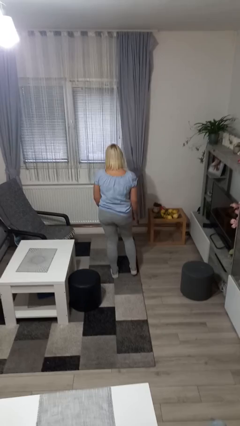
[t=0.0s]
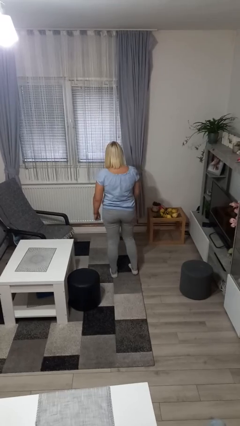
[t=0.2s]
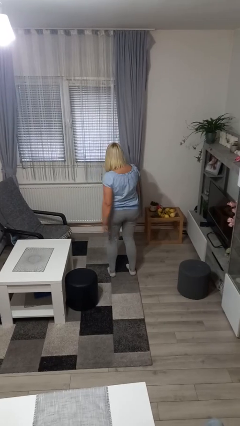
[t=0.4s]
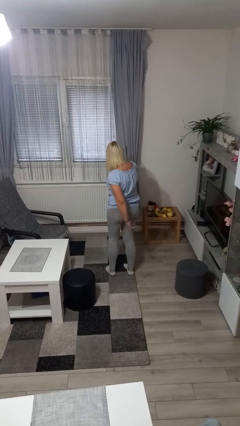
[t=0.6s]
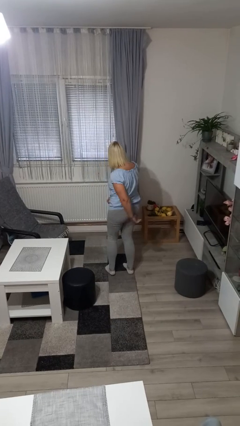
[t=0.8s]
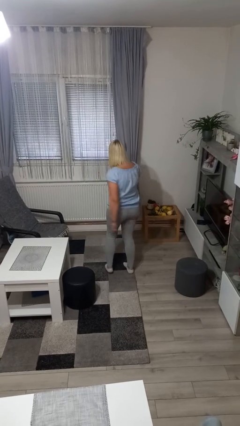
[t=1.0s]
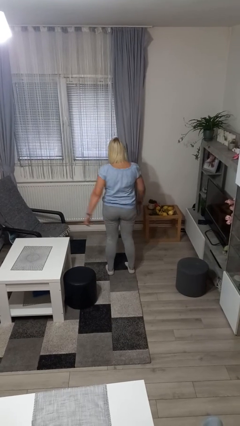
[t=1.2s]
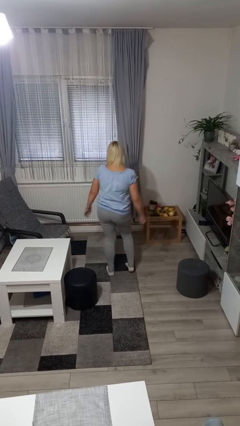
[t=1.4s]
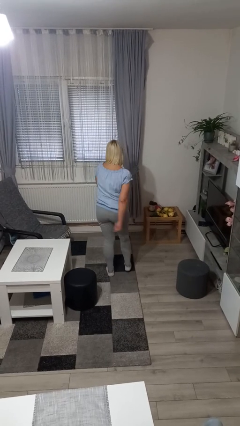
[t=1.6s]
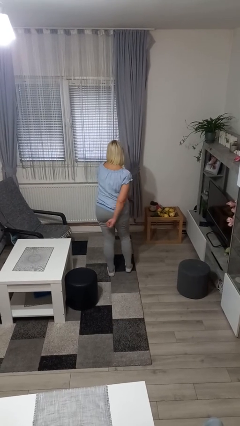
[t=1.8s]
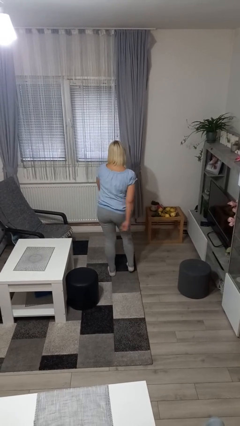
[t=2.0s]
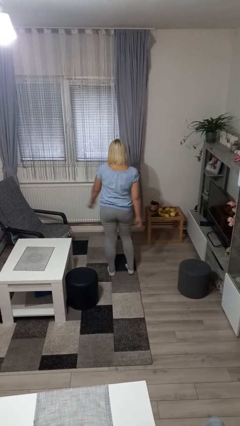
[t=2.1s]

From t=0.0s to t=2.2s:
person dances in place

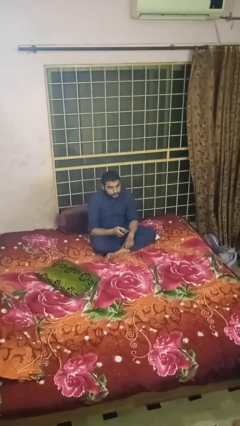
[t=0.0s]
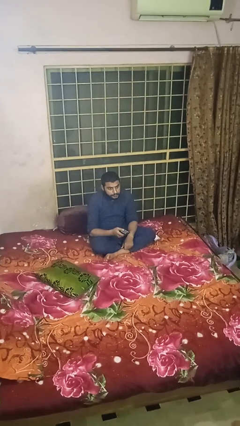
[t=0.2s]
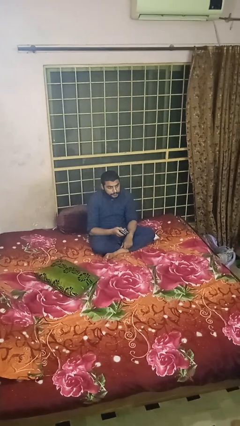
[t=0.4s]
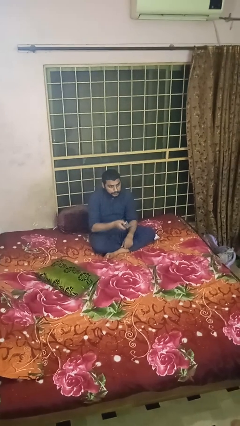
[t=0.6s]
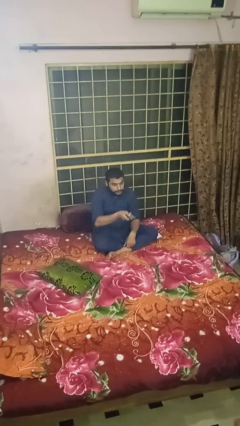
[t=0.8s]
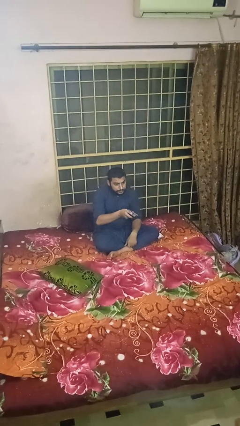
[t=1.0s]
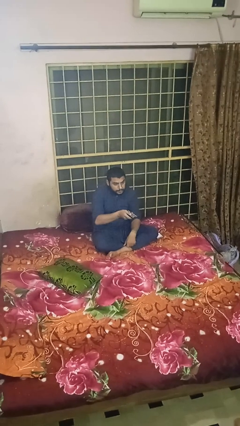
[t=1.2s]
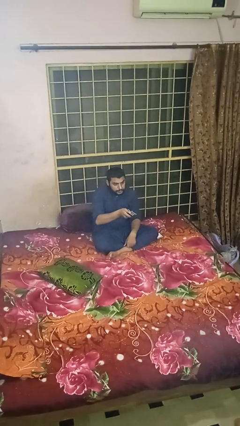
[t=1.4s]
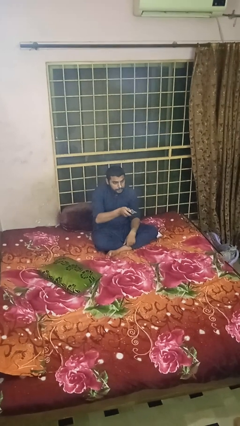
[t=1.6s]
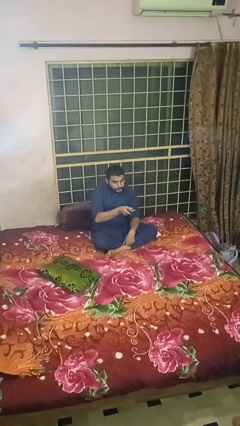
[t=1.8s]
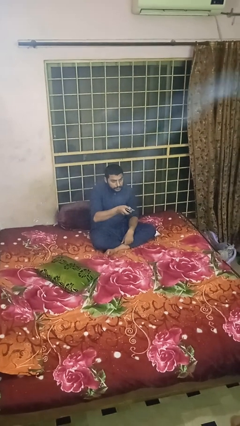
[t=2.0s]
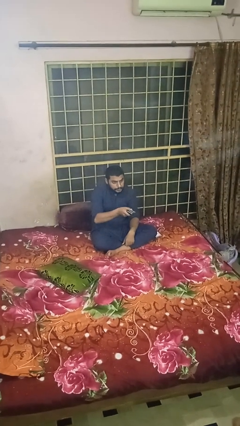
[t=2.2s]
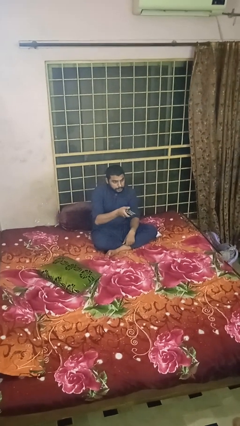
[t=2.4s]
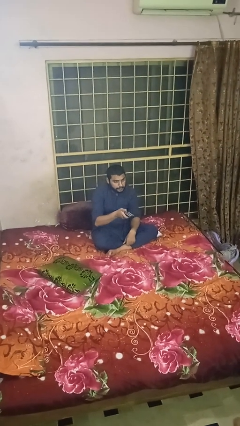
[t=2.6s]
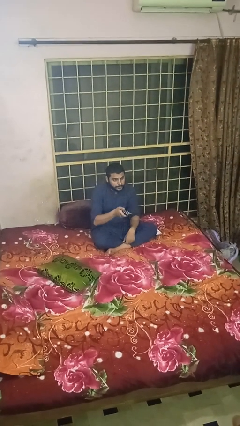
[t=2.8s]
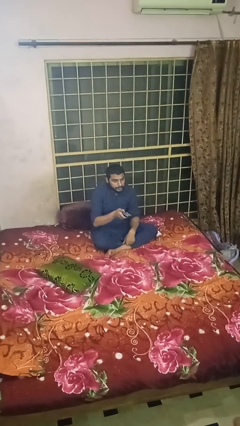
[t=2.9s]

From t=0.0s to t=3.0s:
person uses television remote

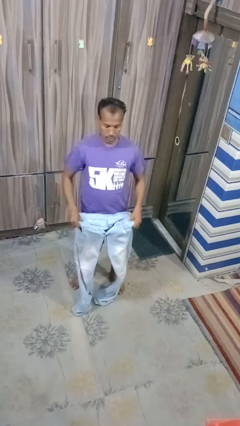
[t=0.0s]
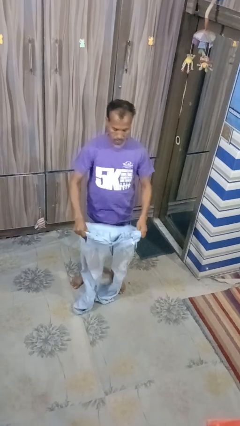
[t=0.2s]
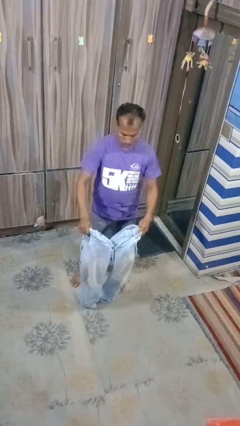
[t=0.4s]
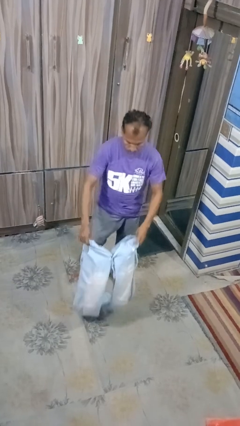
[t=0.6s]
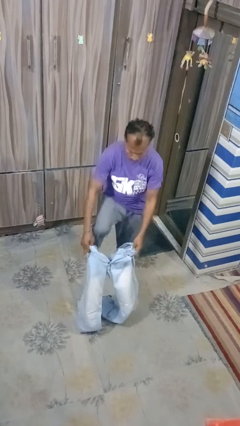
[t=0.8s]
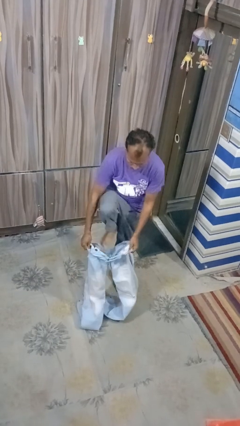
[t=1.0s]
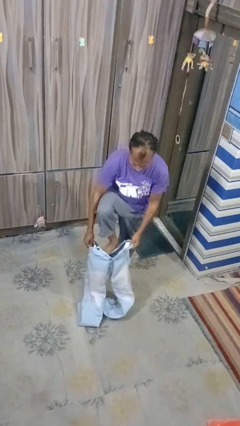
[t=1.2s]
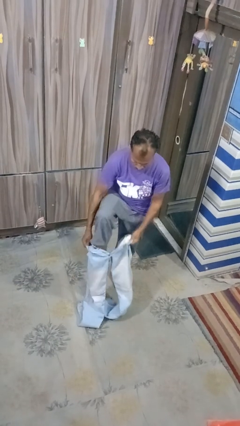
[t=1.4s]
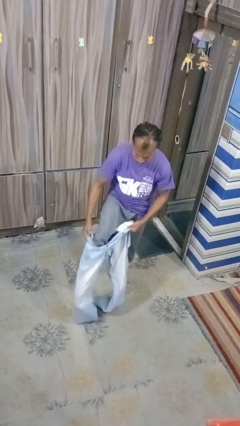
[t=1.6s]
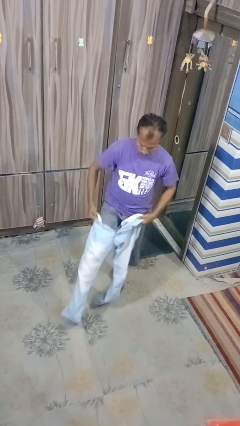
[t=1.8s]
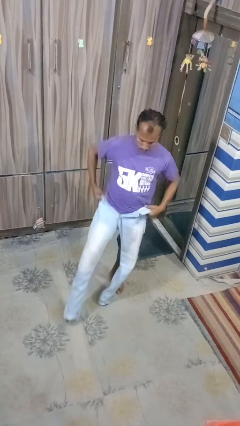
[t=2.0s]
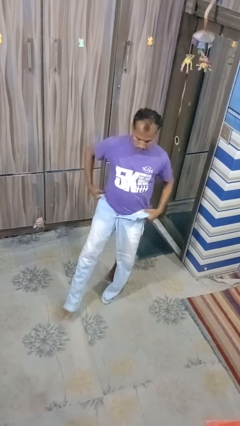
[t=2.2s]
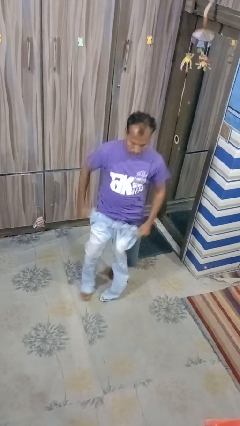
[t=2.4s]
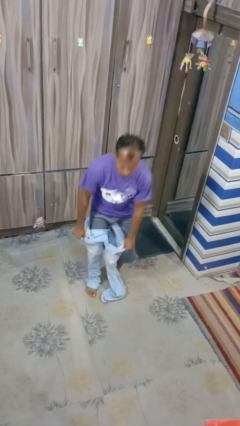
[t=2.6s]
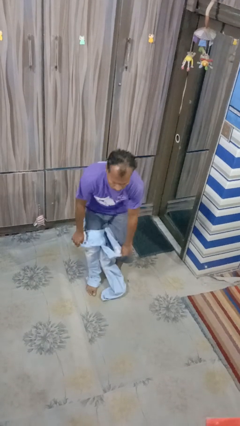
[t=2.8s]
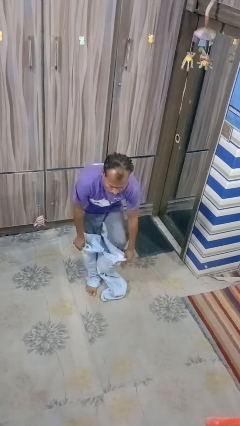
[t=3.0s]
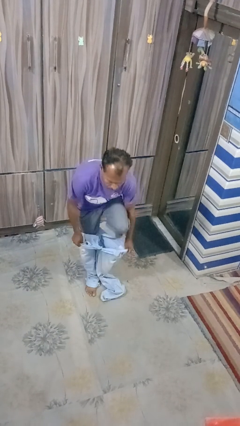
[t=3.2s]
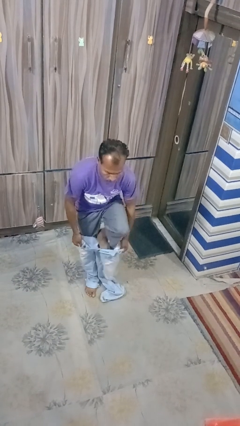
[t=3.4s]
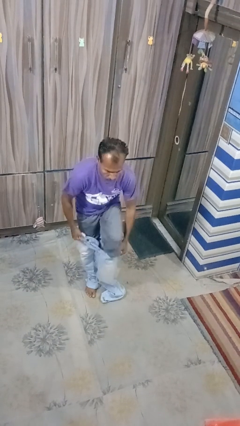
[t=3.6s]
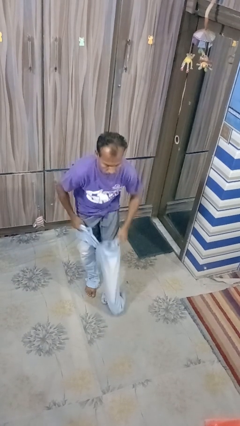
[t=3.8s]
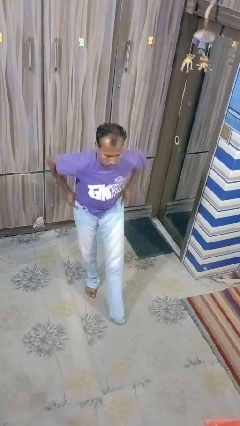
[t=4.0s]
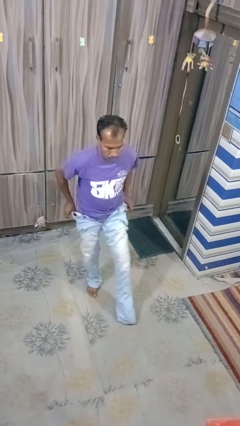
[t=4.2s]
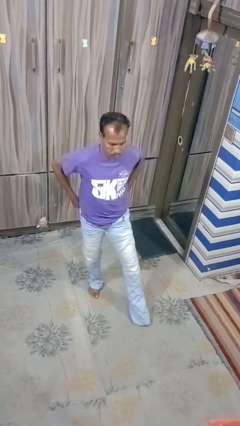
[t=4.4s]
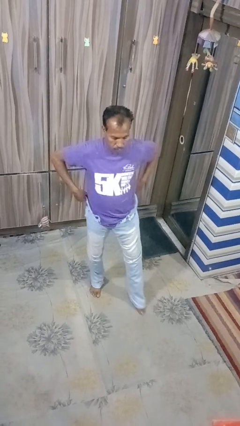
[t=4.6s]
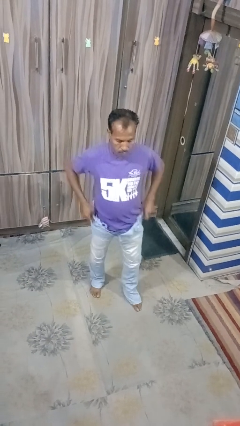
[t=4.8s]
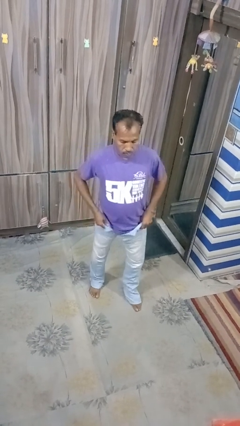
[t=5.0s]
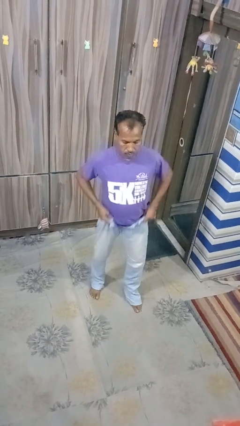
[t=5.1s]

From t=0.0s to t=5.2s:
person puts on pants

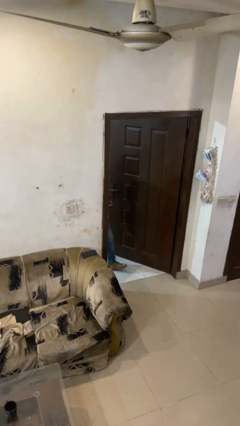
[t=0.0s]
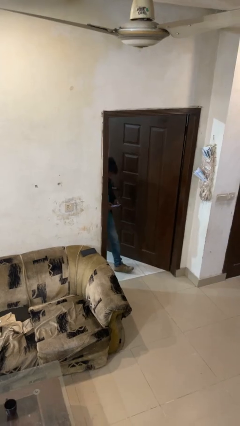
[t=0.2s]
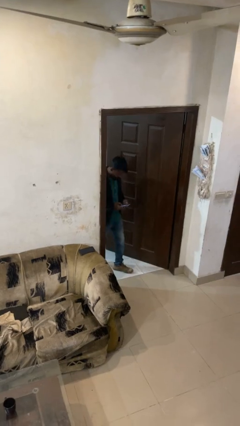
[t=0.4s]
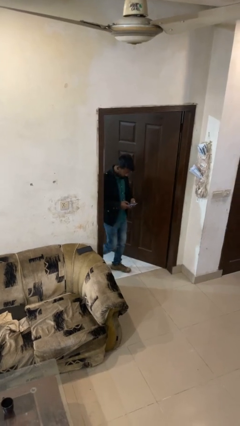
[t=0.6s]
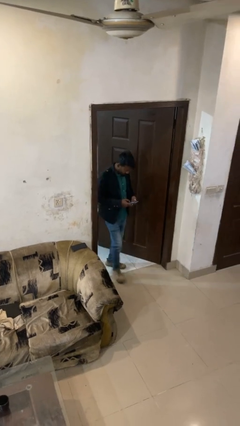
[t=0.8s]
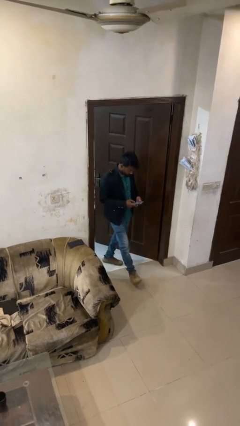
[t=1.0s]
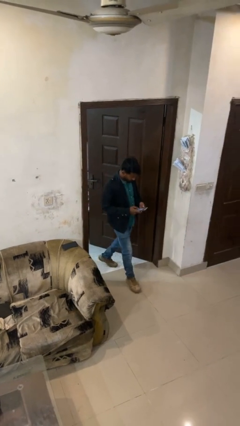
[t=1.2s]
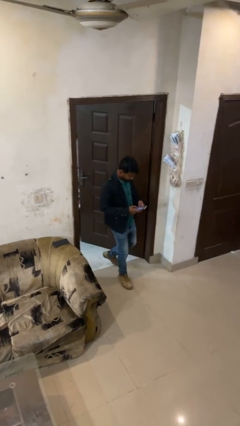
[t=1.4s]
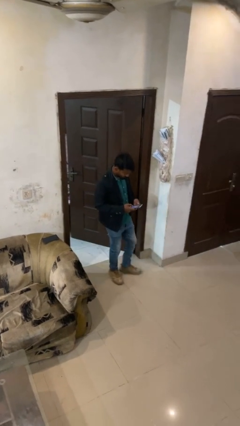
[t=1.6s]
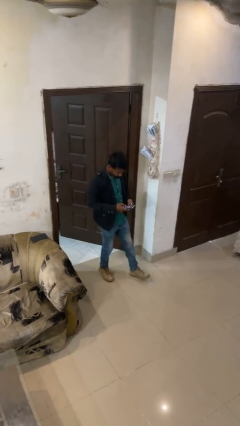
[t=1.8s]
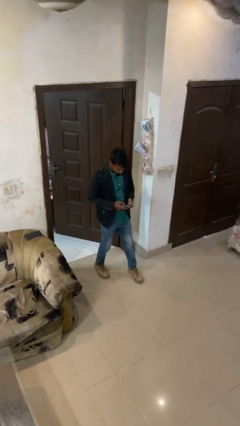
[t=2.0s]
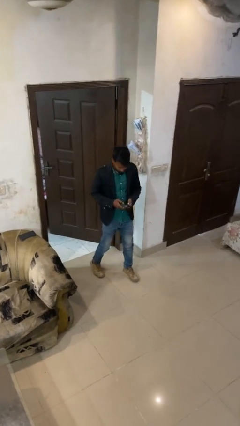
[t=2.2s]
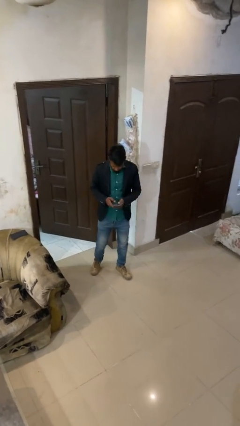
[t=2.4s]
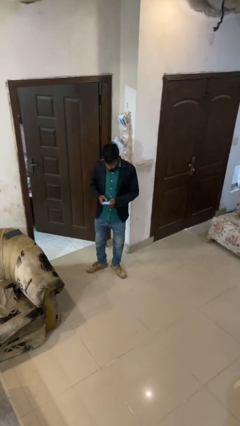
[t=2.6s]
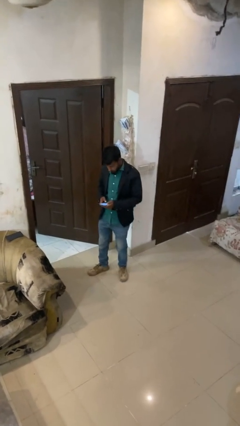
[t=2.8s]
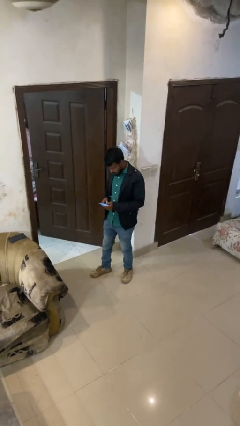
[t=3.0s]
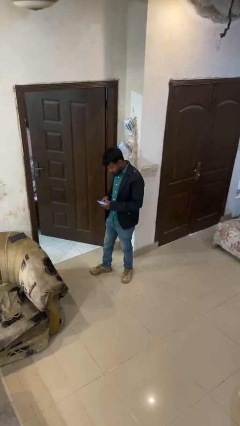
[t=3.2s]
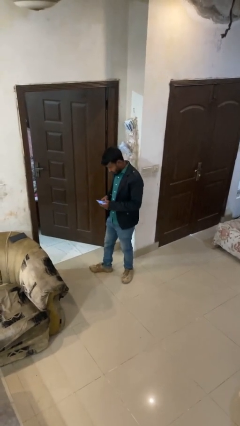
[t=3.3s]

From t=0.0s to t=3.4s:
person enters scene through structure

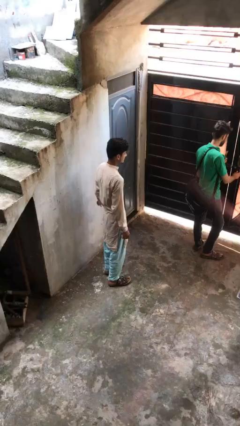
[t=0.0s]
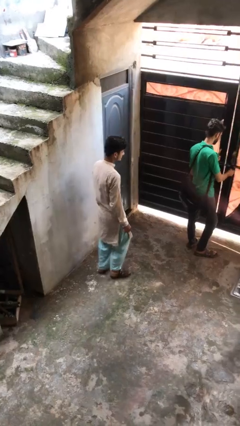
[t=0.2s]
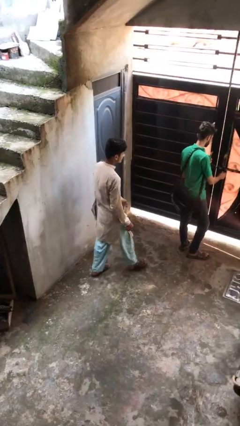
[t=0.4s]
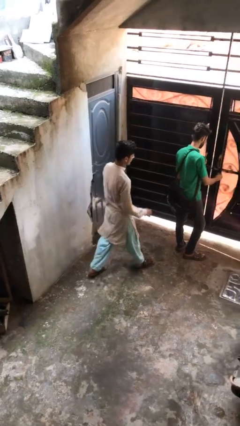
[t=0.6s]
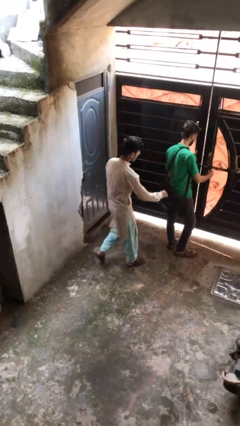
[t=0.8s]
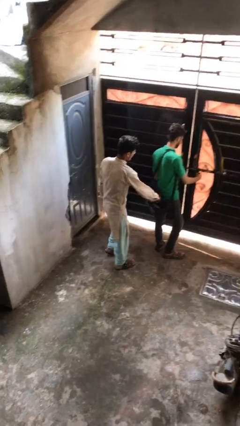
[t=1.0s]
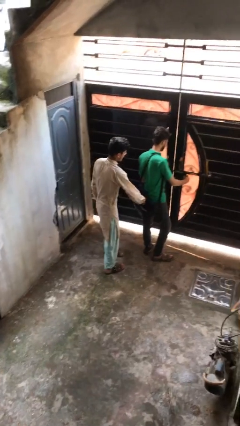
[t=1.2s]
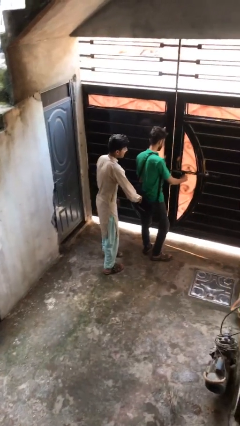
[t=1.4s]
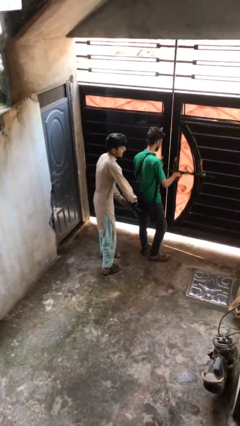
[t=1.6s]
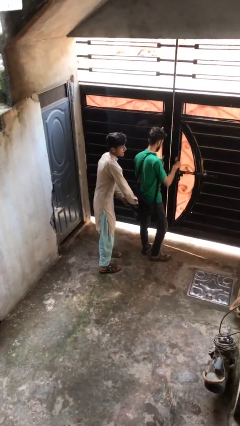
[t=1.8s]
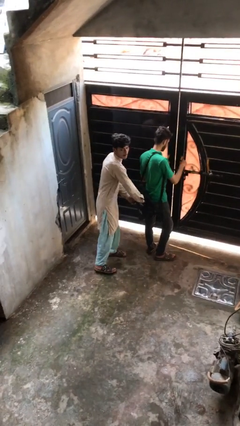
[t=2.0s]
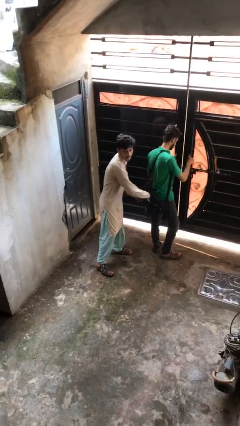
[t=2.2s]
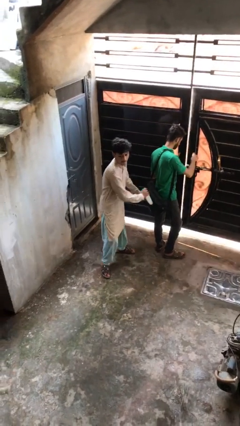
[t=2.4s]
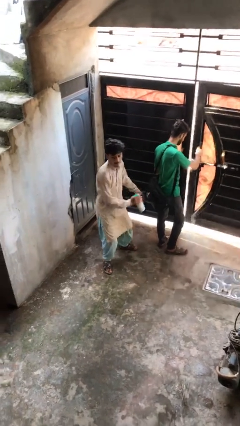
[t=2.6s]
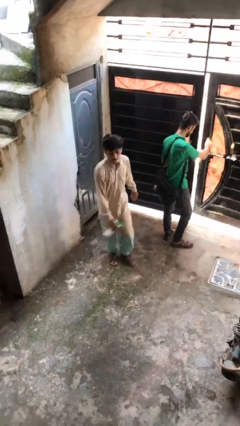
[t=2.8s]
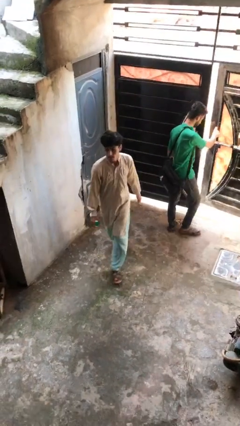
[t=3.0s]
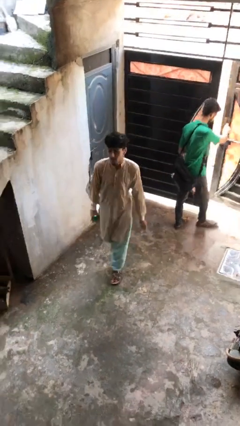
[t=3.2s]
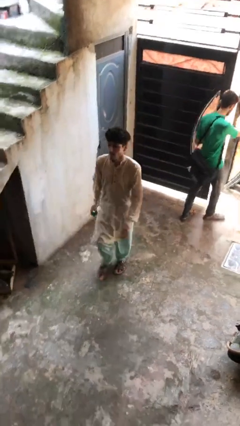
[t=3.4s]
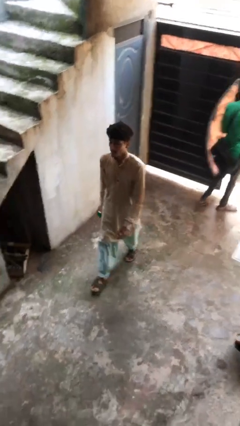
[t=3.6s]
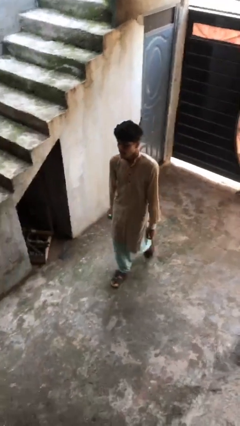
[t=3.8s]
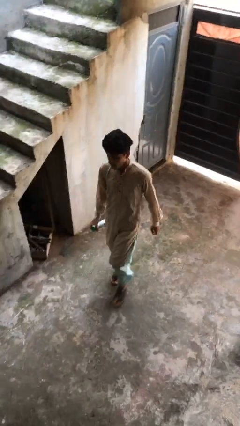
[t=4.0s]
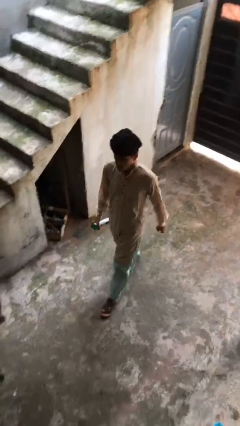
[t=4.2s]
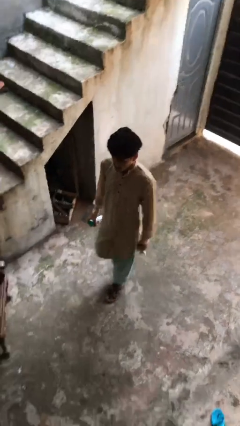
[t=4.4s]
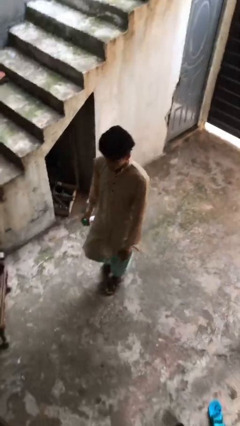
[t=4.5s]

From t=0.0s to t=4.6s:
person steals object from person
